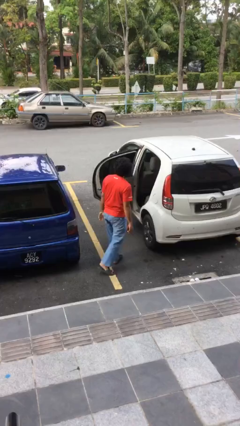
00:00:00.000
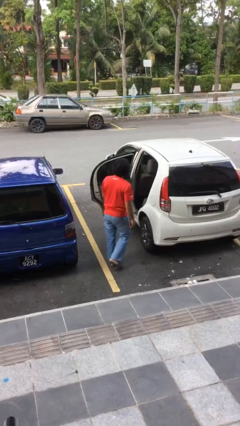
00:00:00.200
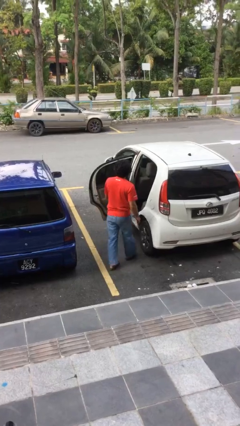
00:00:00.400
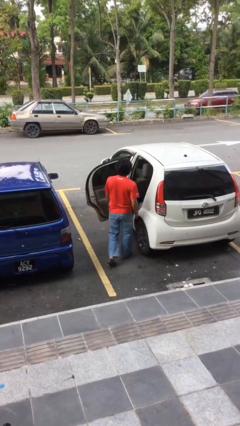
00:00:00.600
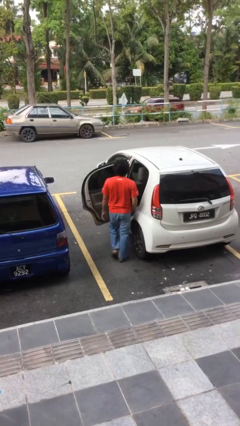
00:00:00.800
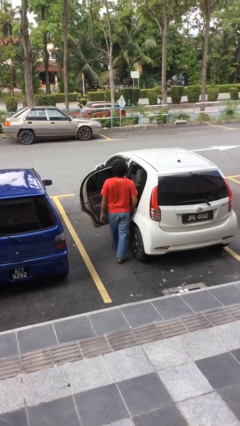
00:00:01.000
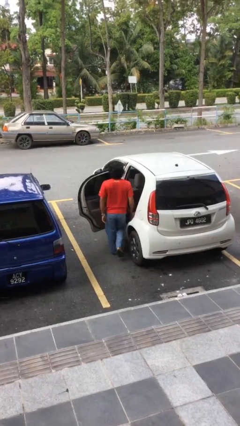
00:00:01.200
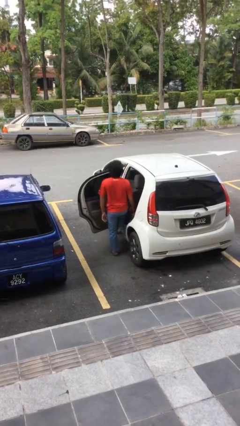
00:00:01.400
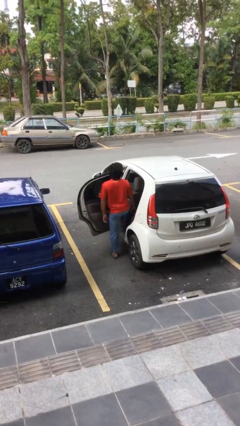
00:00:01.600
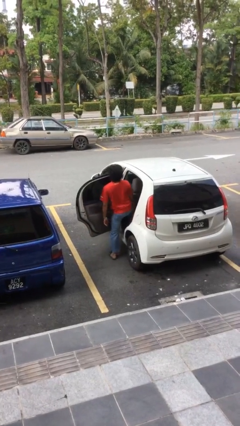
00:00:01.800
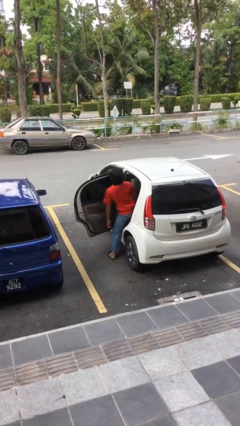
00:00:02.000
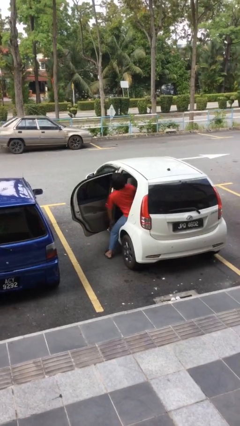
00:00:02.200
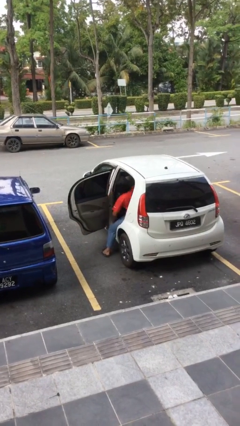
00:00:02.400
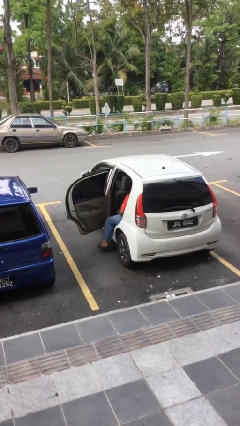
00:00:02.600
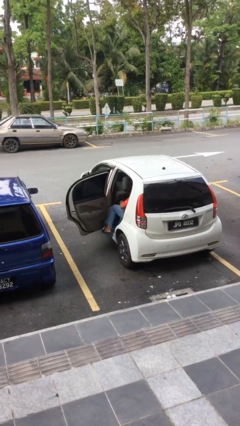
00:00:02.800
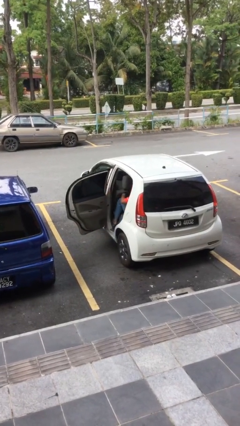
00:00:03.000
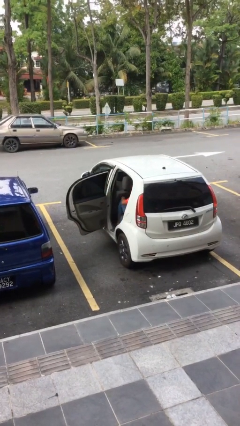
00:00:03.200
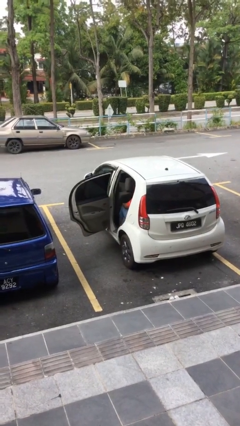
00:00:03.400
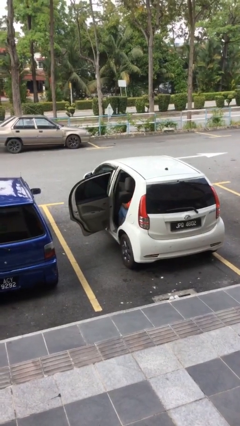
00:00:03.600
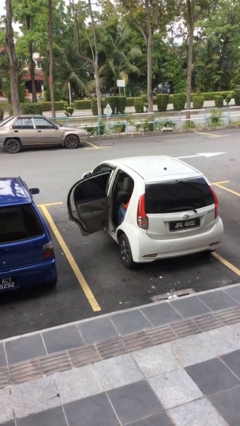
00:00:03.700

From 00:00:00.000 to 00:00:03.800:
person enters car

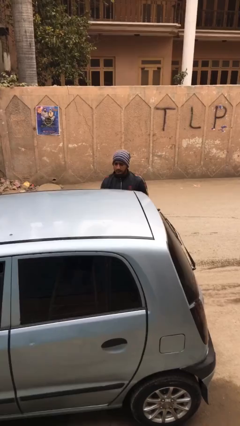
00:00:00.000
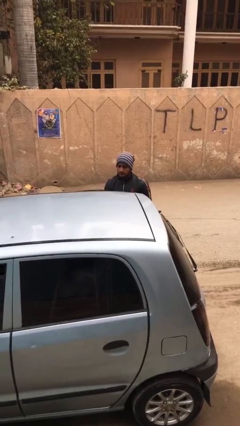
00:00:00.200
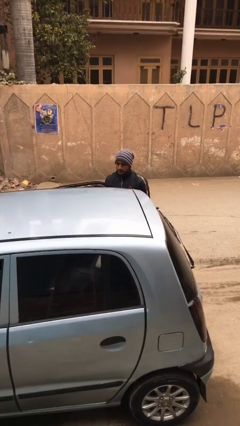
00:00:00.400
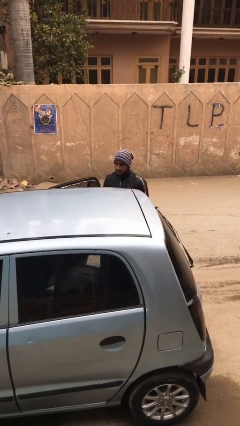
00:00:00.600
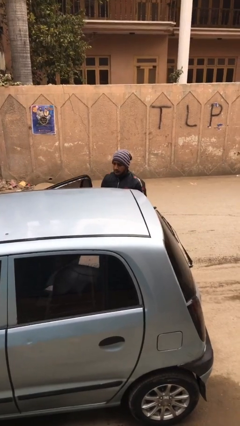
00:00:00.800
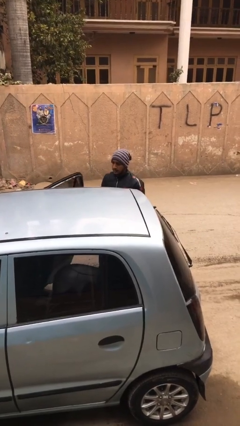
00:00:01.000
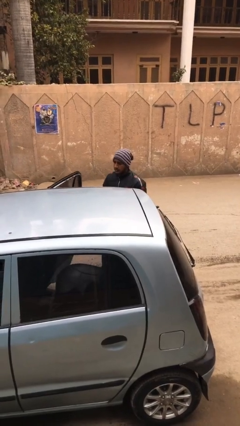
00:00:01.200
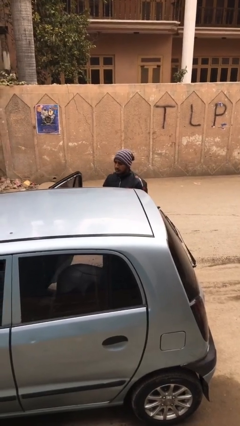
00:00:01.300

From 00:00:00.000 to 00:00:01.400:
person opens car door

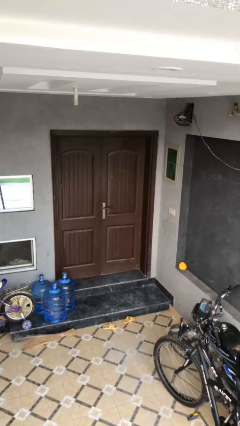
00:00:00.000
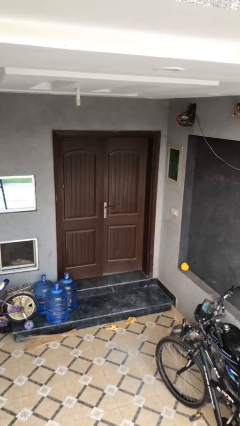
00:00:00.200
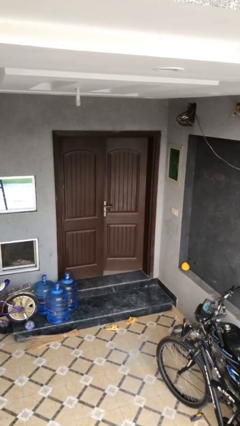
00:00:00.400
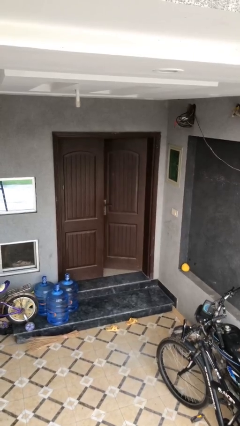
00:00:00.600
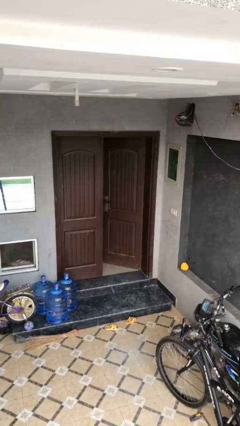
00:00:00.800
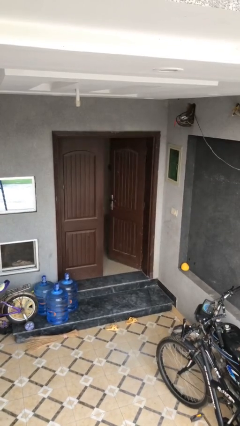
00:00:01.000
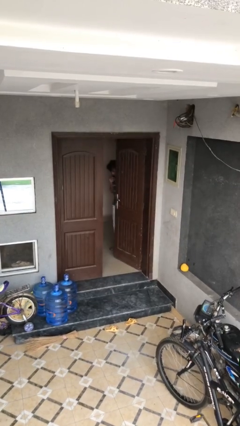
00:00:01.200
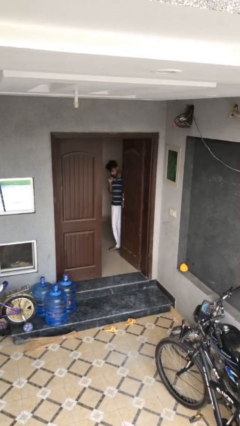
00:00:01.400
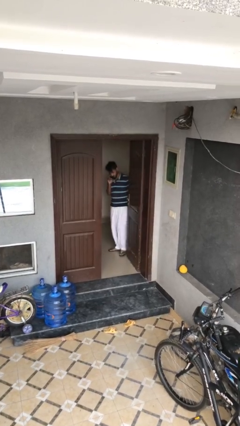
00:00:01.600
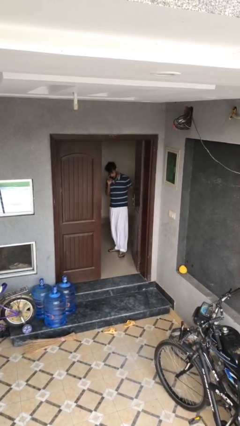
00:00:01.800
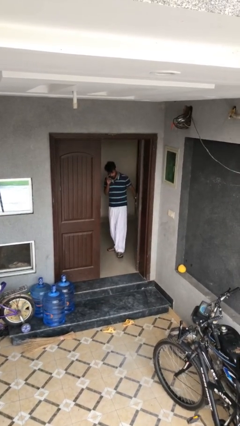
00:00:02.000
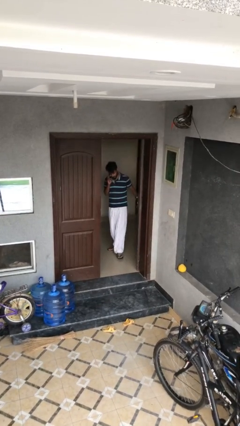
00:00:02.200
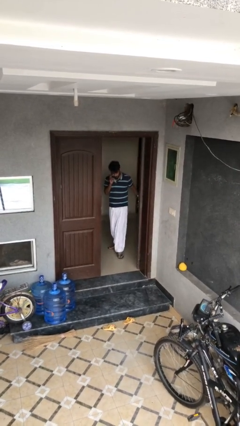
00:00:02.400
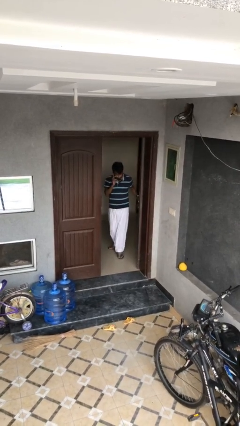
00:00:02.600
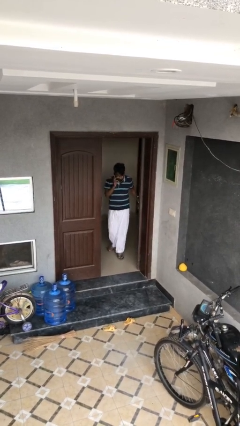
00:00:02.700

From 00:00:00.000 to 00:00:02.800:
person opens facility door

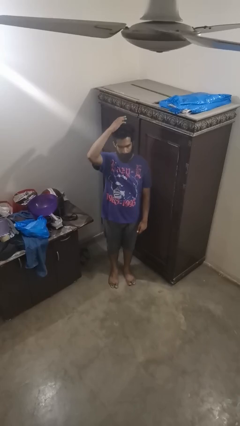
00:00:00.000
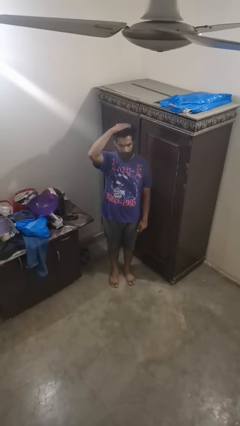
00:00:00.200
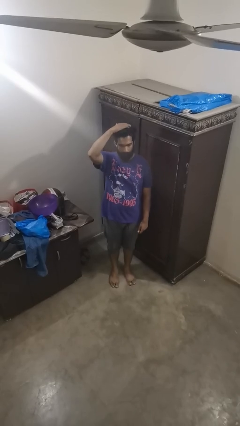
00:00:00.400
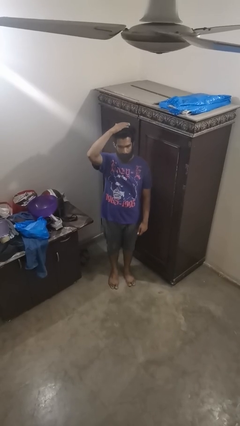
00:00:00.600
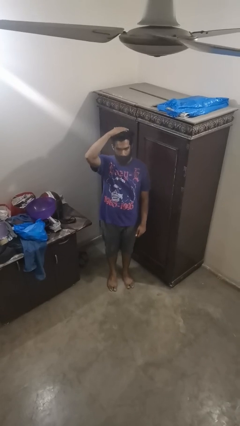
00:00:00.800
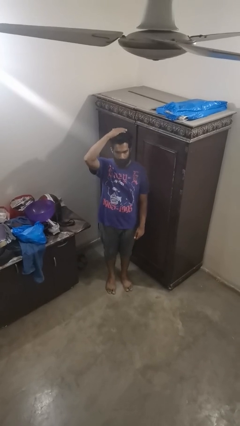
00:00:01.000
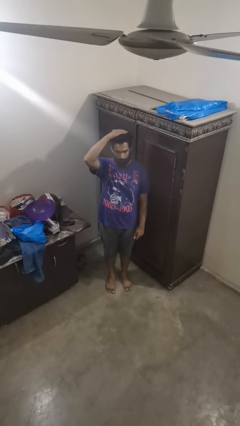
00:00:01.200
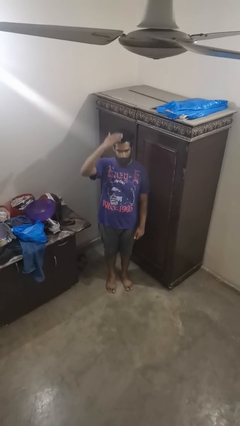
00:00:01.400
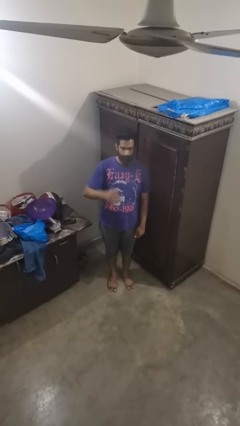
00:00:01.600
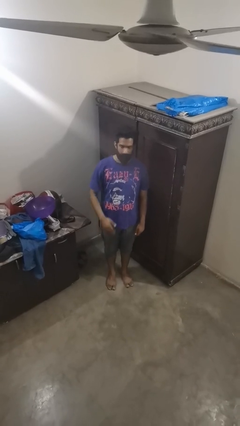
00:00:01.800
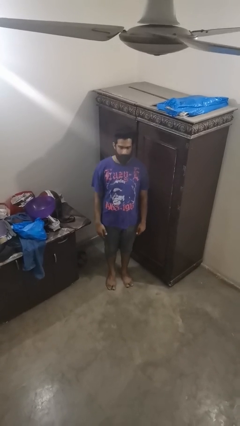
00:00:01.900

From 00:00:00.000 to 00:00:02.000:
person pats head

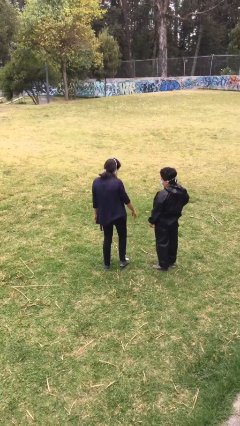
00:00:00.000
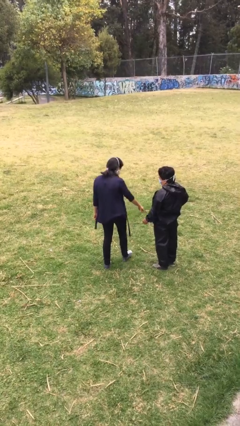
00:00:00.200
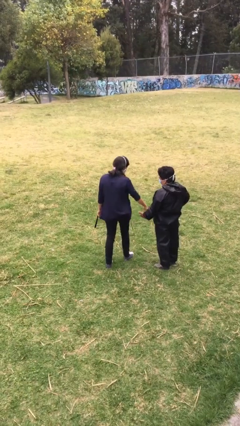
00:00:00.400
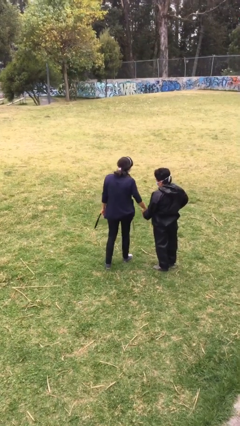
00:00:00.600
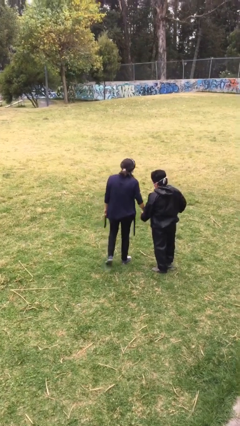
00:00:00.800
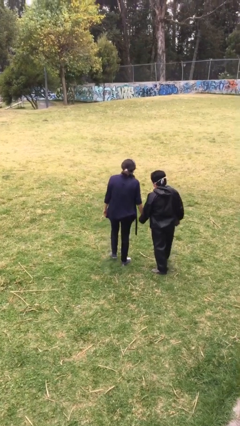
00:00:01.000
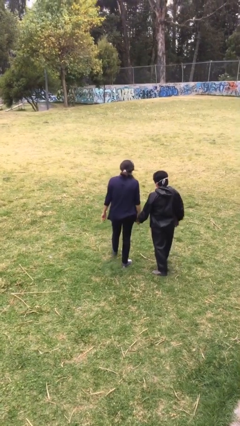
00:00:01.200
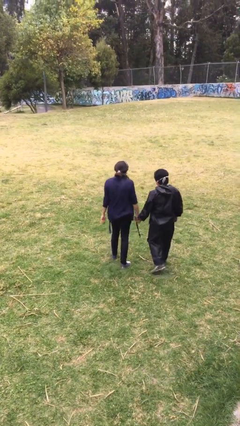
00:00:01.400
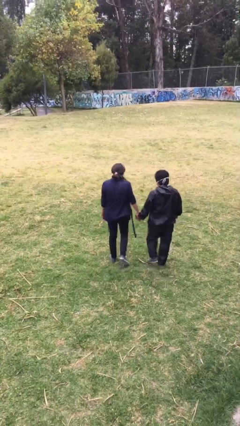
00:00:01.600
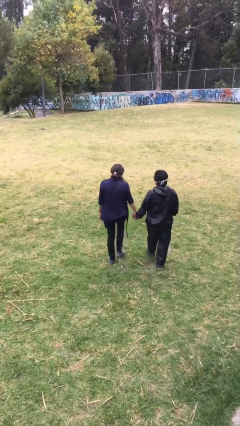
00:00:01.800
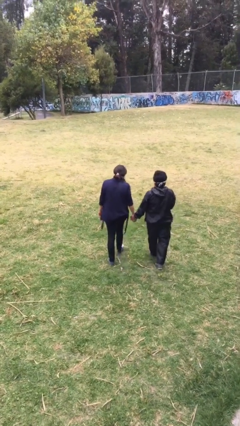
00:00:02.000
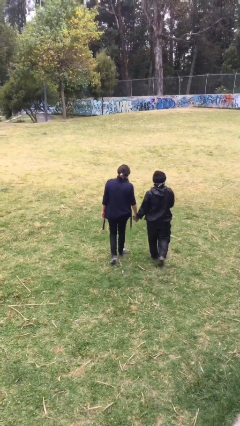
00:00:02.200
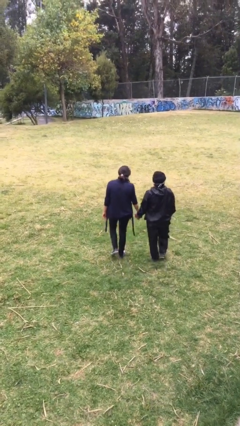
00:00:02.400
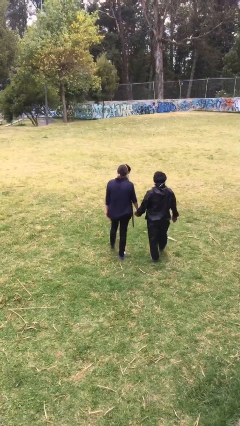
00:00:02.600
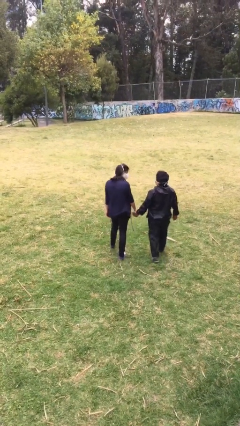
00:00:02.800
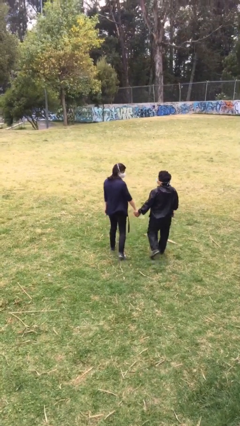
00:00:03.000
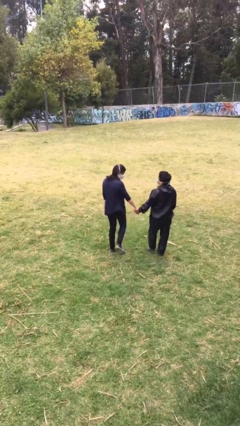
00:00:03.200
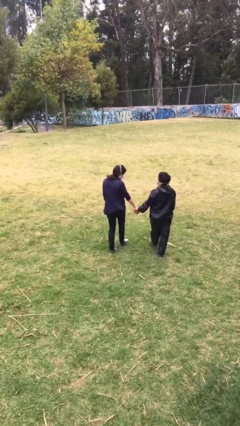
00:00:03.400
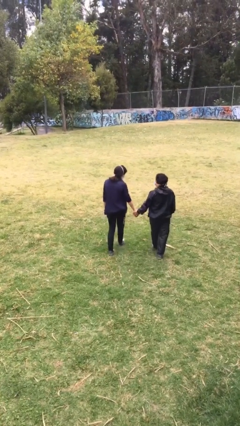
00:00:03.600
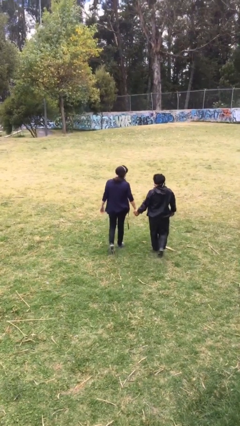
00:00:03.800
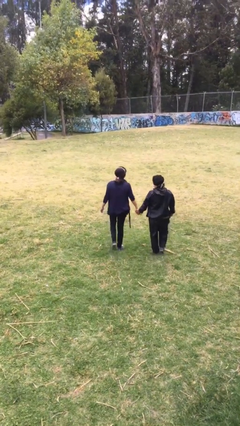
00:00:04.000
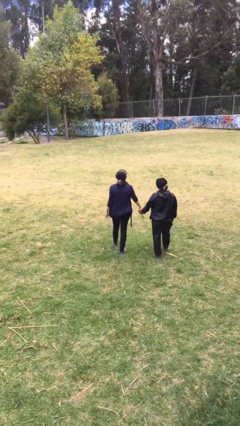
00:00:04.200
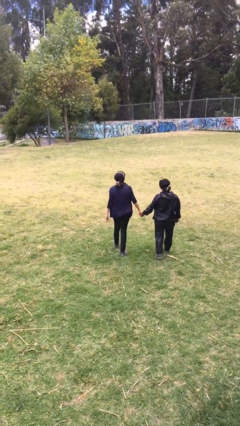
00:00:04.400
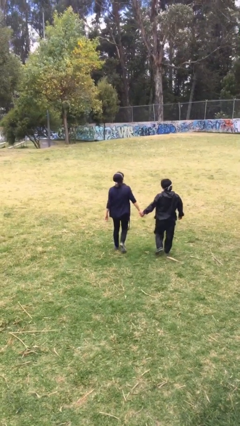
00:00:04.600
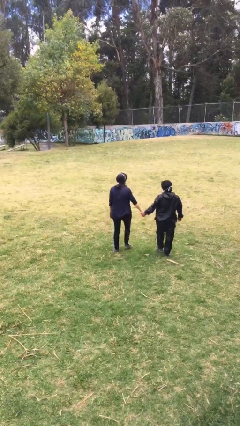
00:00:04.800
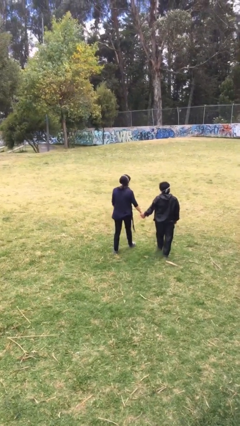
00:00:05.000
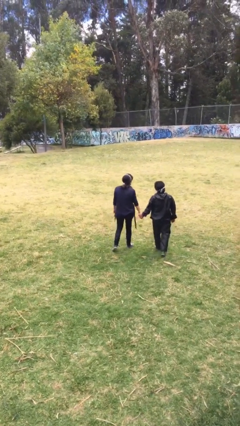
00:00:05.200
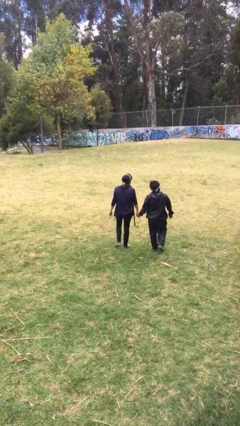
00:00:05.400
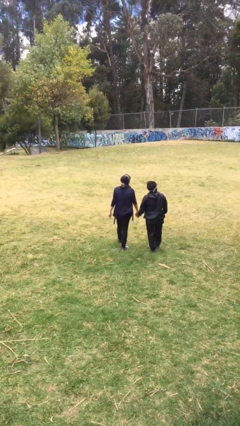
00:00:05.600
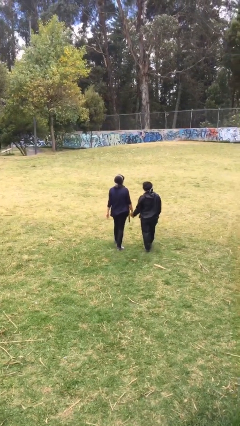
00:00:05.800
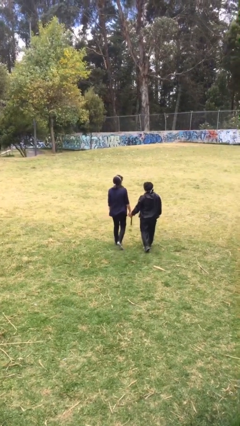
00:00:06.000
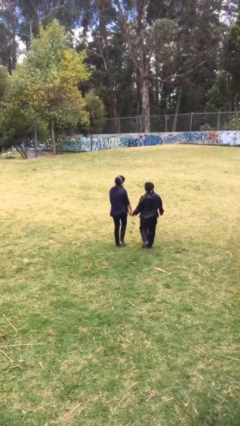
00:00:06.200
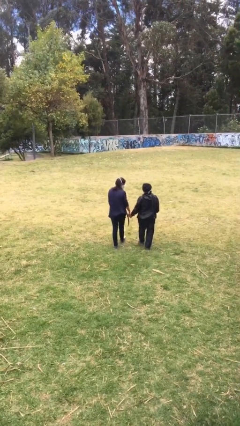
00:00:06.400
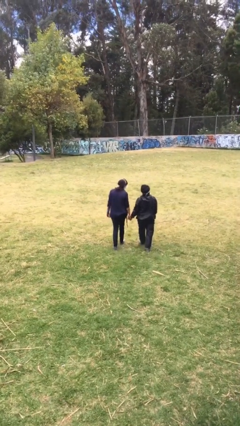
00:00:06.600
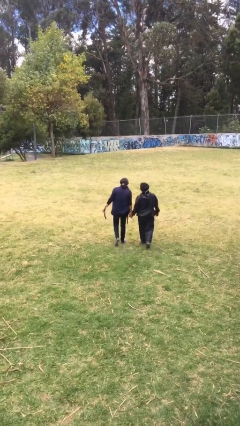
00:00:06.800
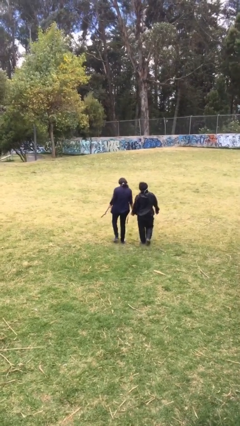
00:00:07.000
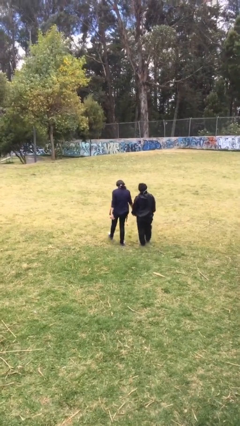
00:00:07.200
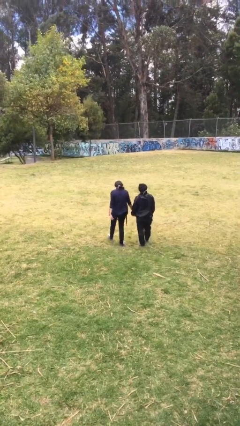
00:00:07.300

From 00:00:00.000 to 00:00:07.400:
person holds hand

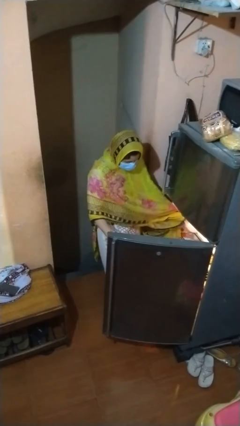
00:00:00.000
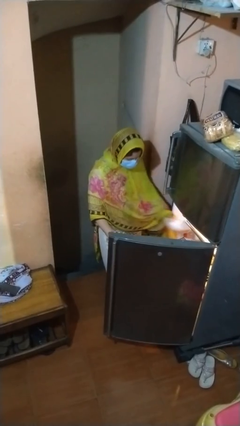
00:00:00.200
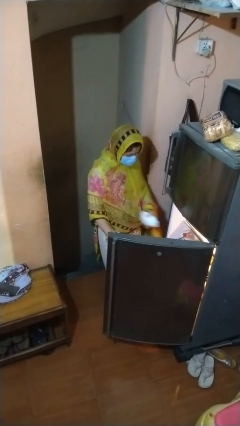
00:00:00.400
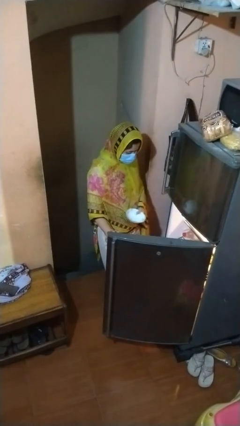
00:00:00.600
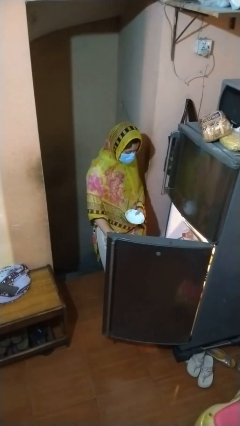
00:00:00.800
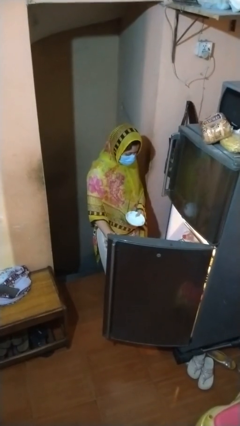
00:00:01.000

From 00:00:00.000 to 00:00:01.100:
person takes object from refrigerator
